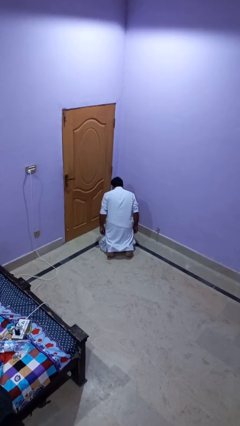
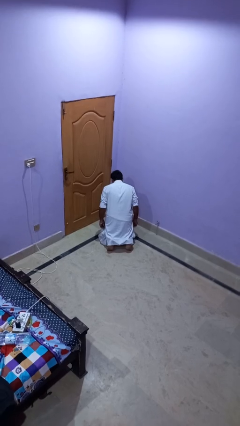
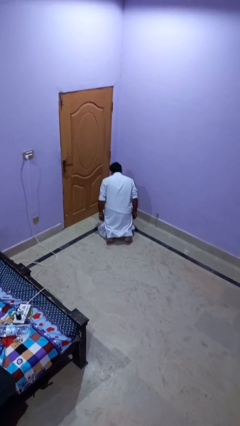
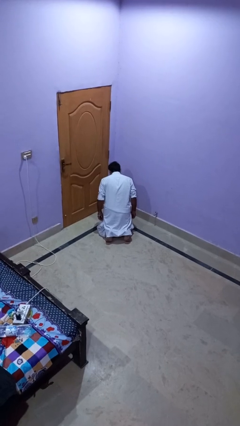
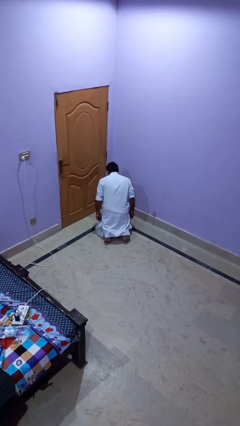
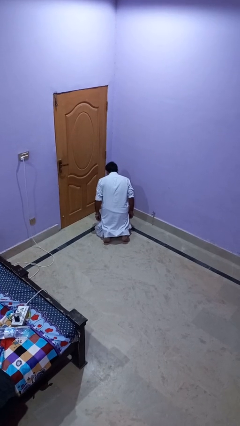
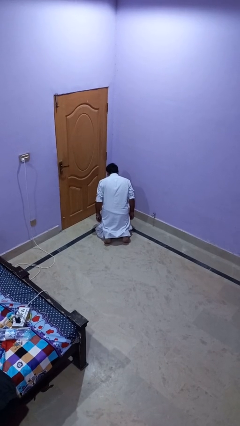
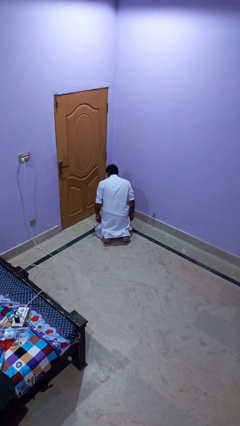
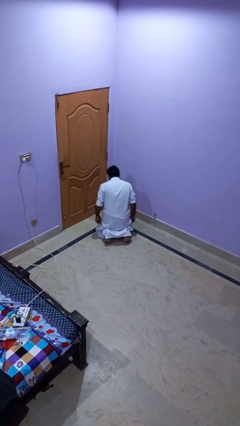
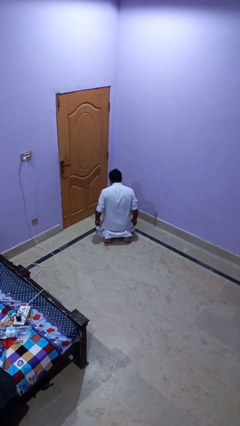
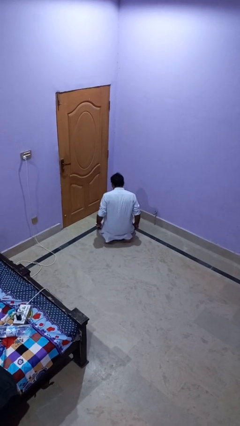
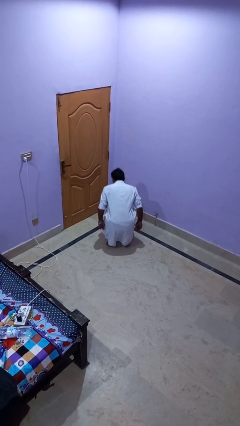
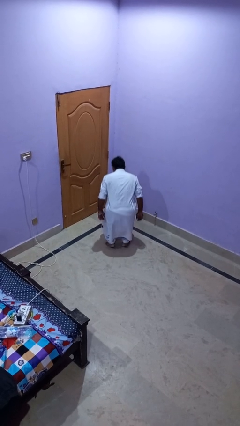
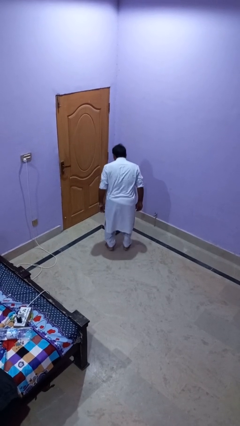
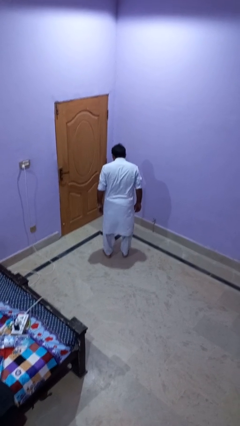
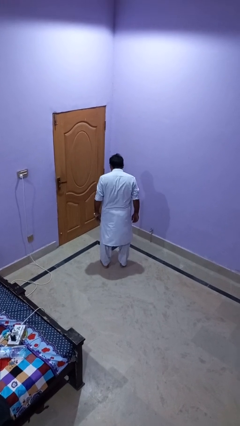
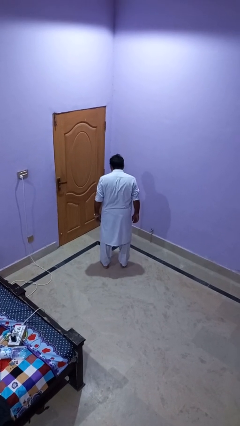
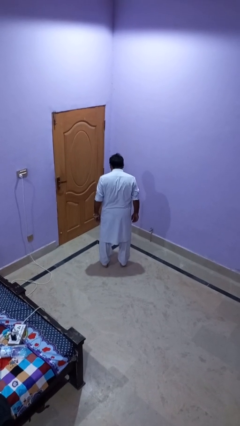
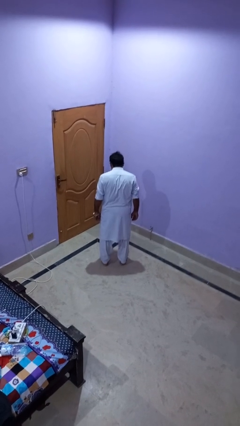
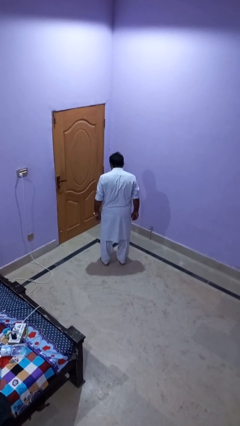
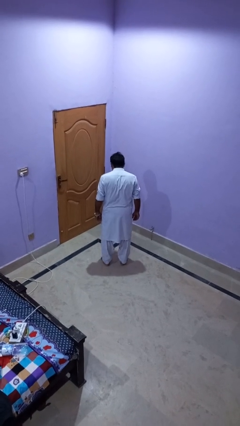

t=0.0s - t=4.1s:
person stands up from floor

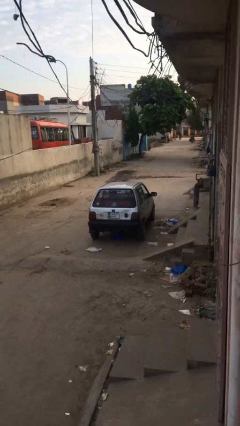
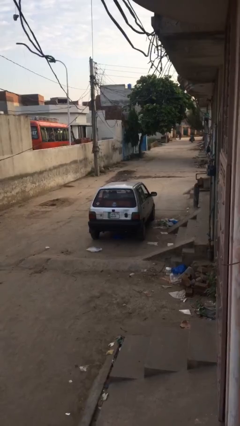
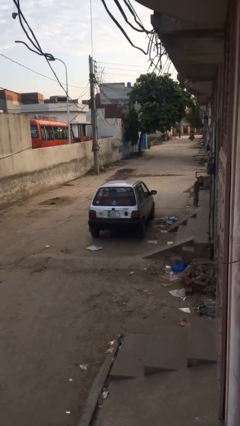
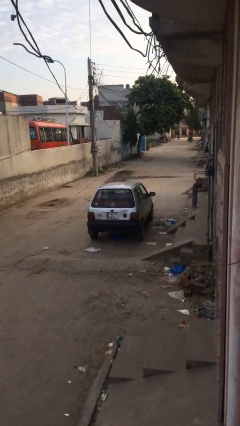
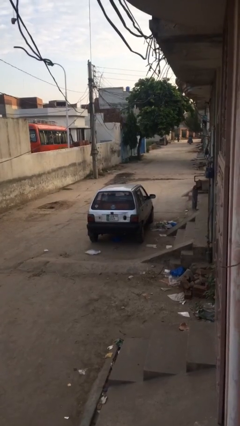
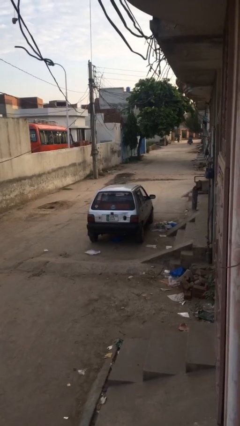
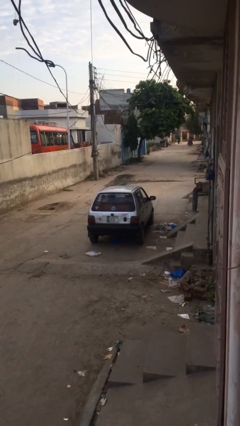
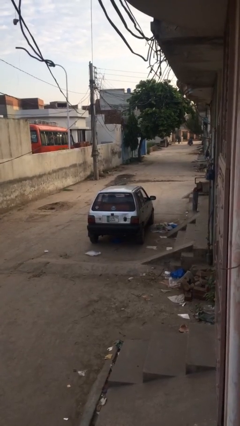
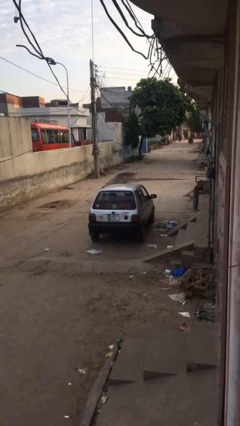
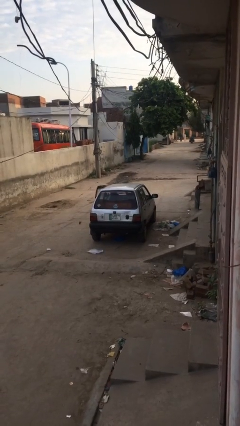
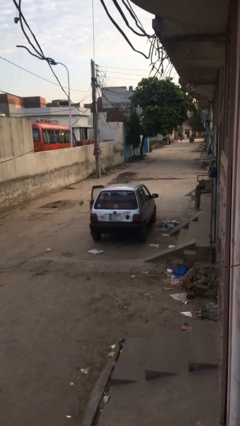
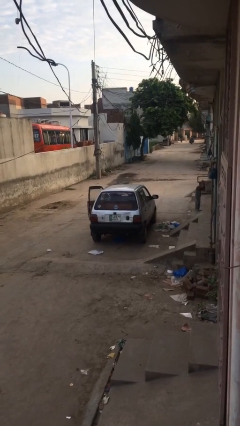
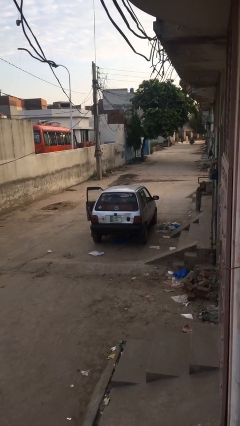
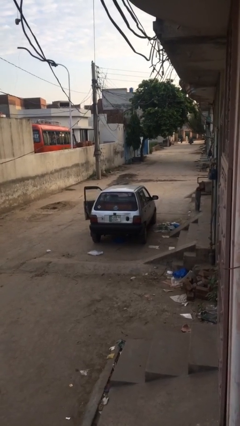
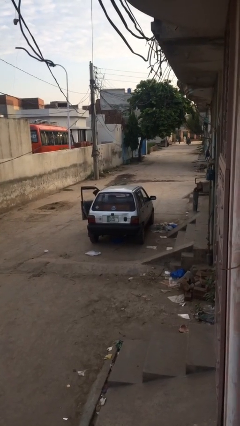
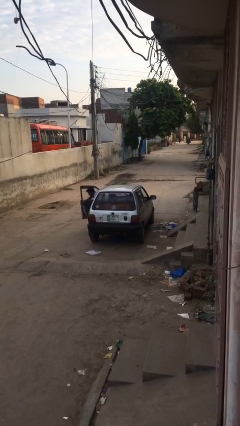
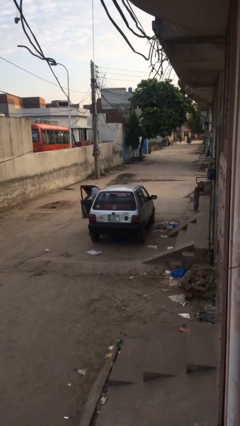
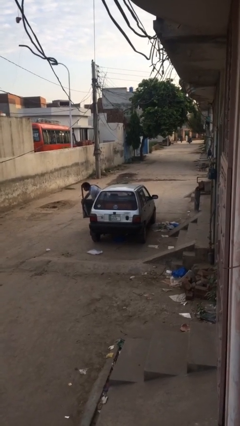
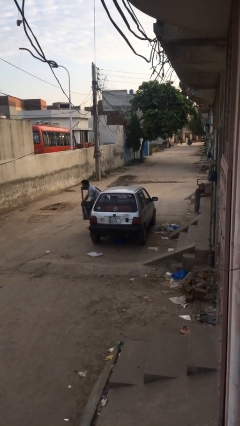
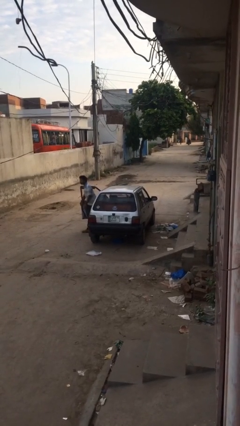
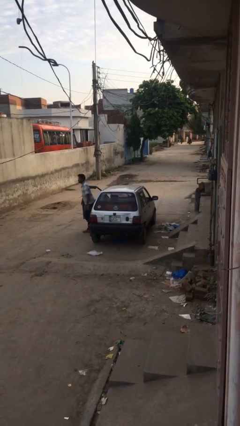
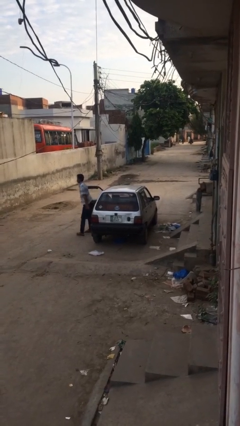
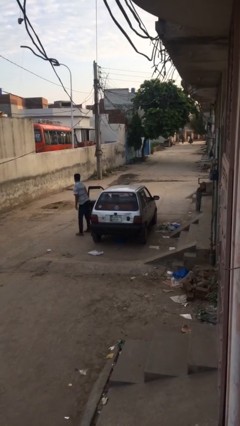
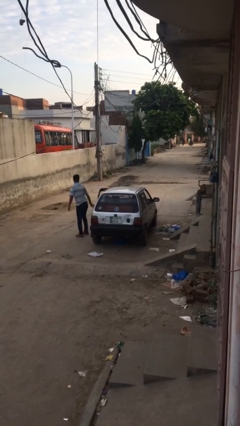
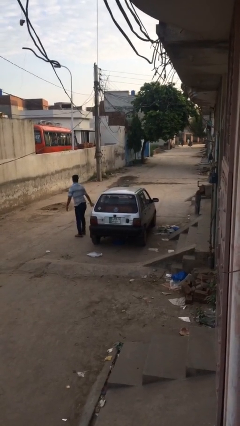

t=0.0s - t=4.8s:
car drops off person

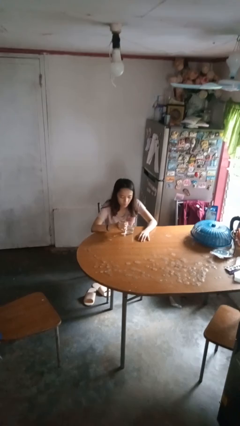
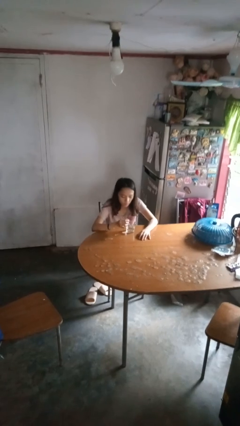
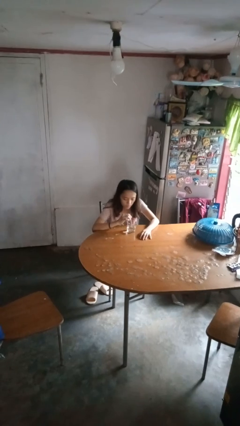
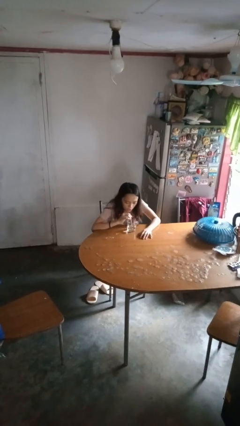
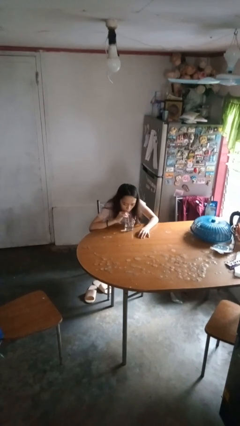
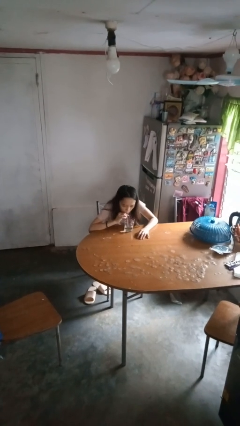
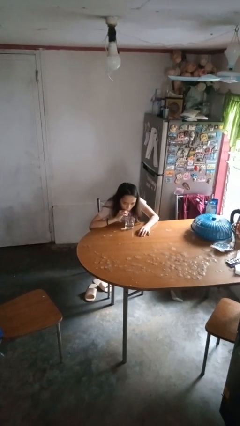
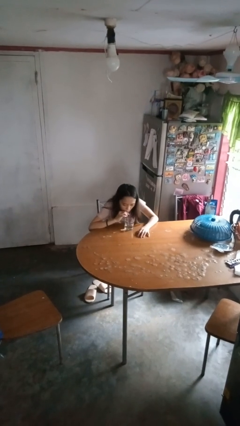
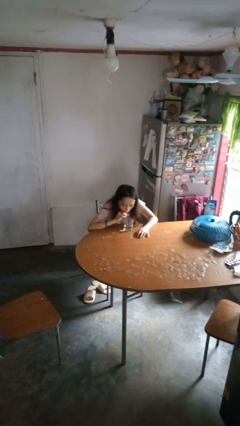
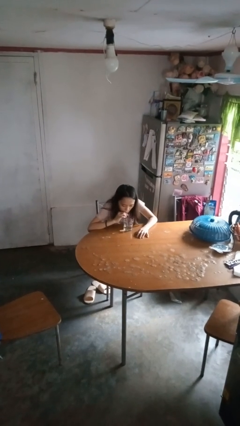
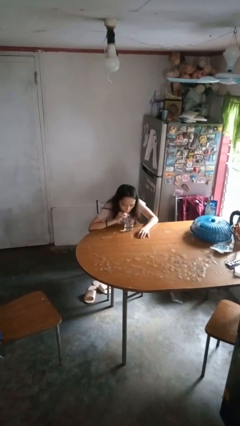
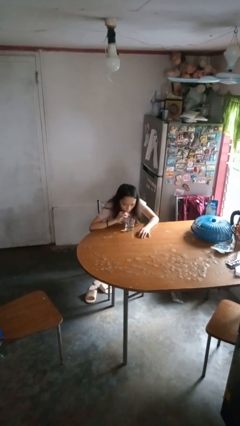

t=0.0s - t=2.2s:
person drinks from straw

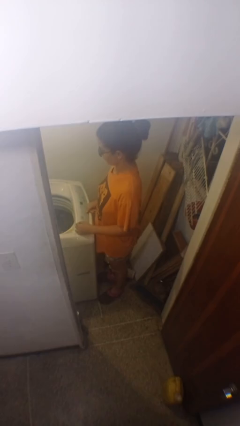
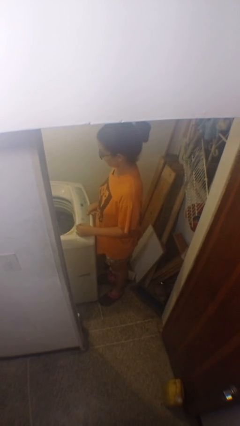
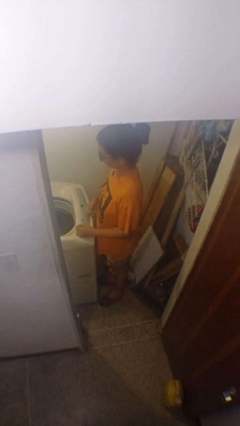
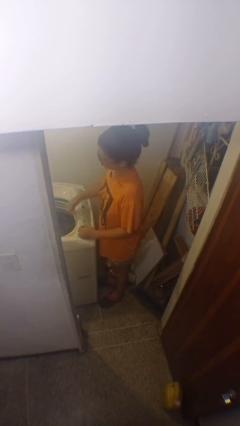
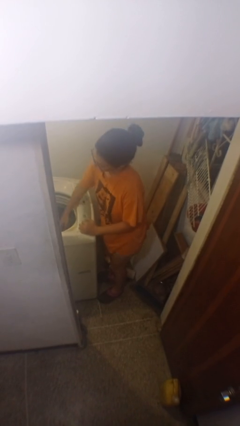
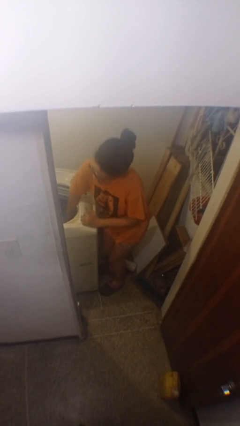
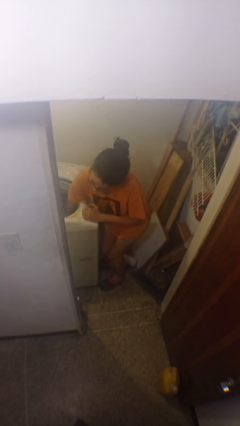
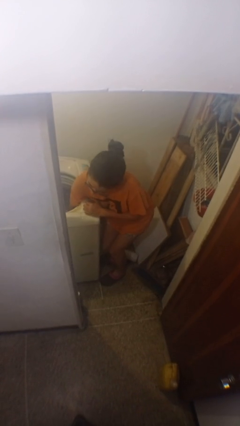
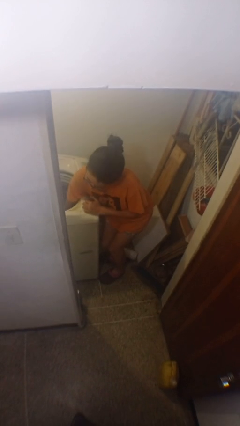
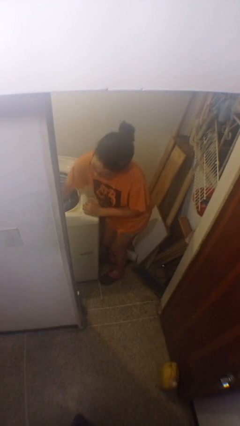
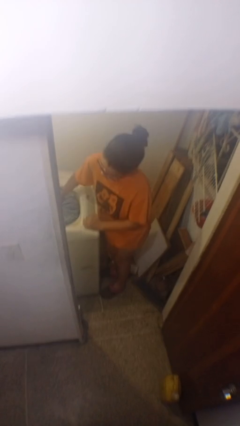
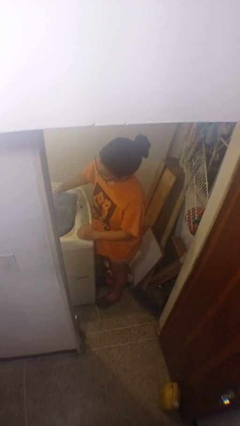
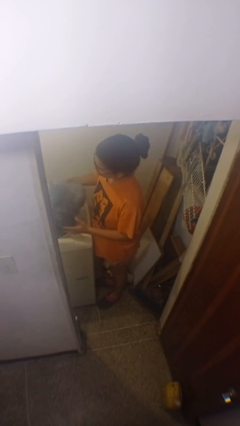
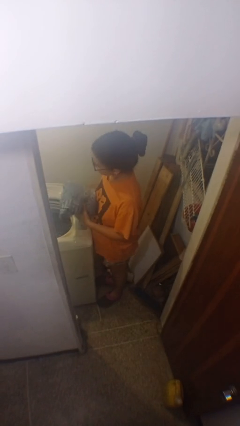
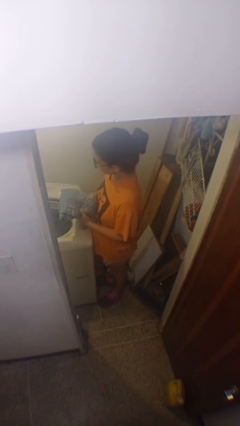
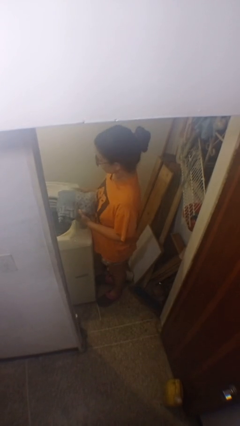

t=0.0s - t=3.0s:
person unloads clotheswasher

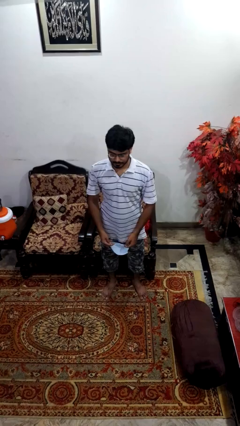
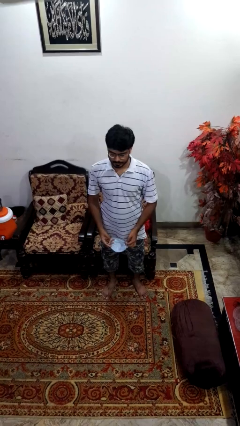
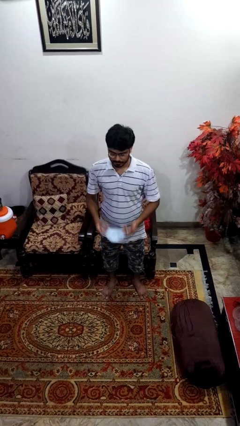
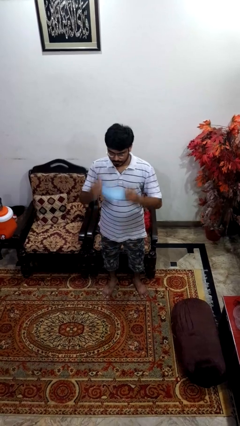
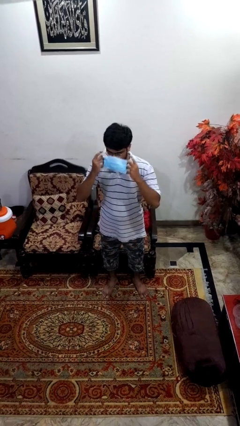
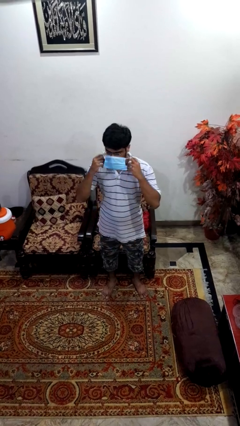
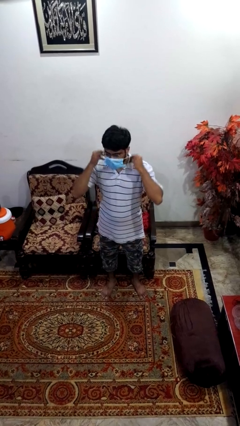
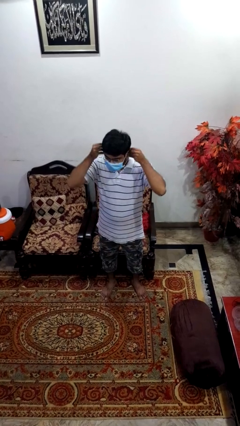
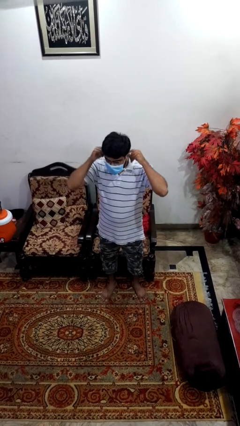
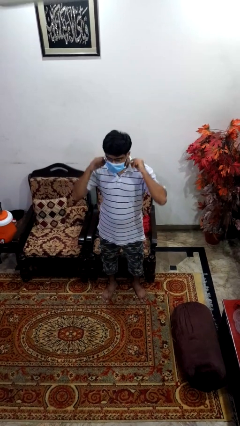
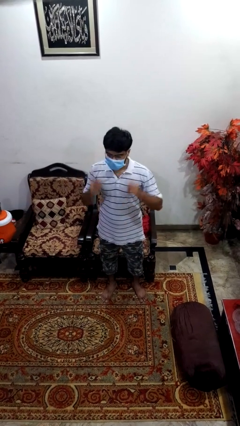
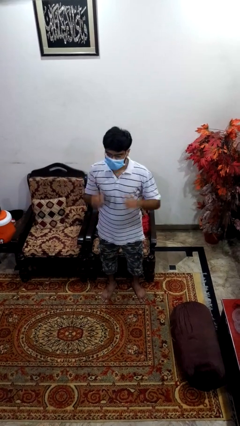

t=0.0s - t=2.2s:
person puts on facemask

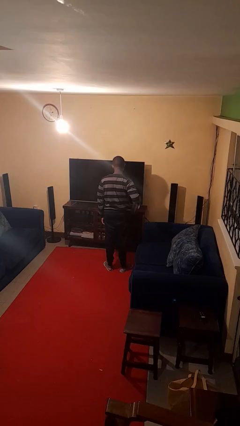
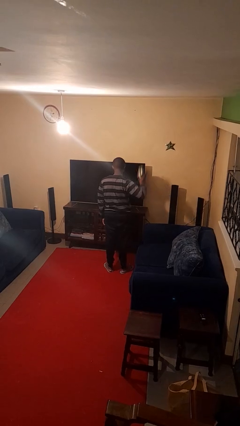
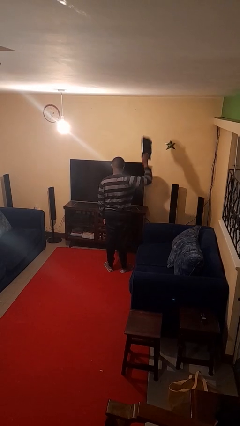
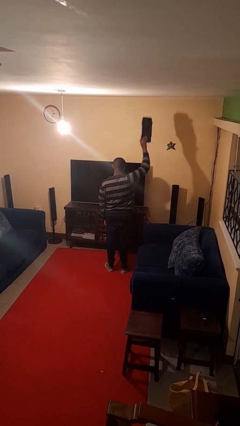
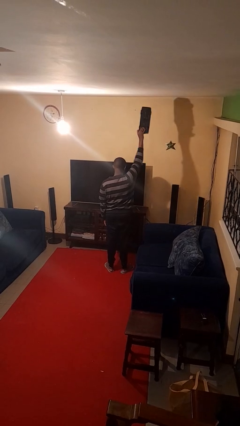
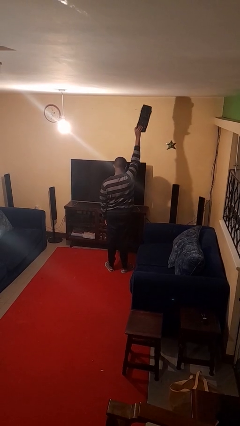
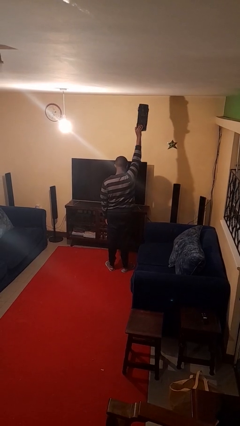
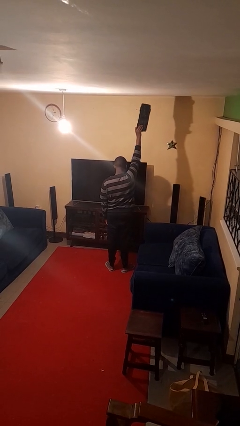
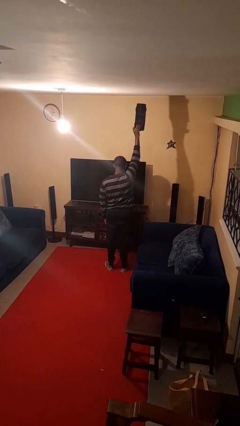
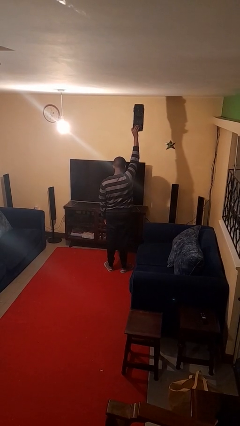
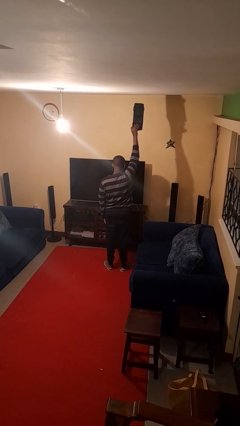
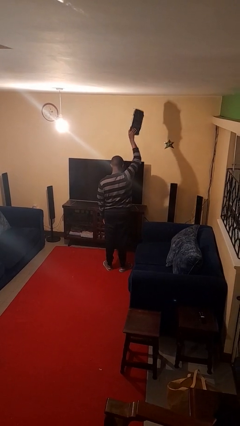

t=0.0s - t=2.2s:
person holds object above head
